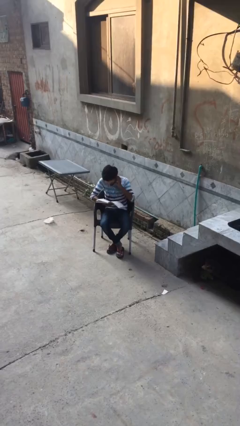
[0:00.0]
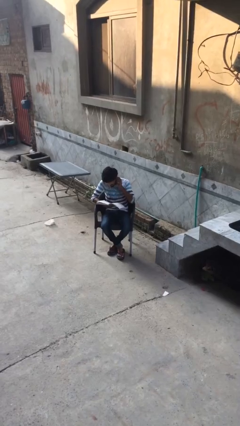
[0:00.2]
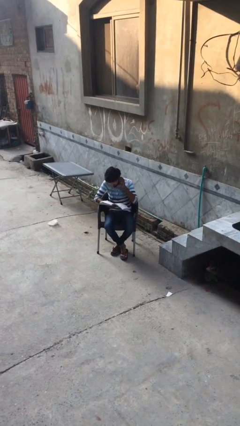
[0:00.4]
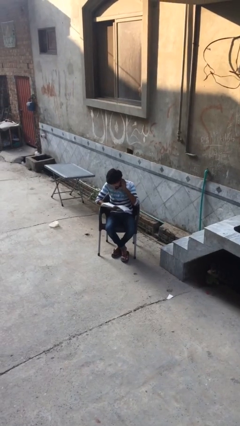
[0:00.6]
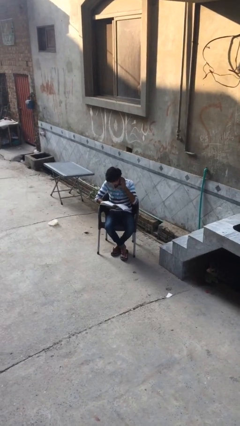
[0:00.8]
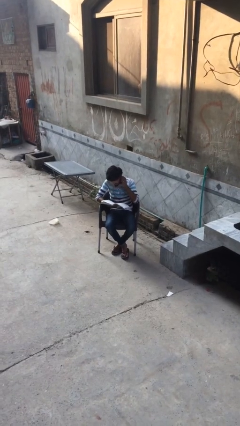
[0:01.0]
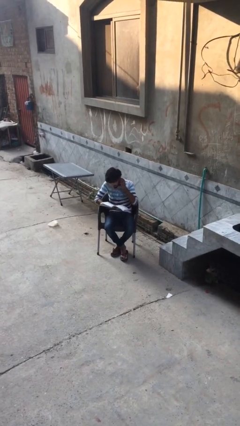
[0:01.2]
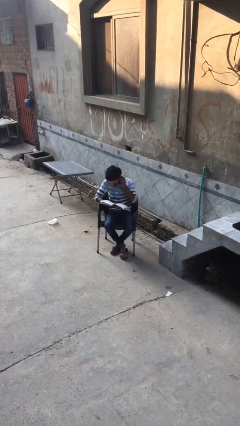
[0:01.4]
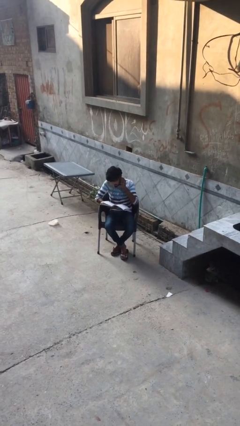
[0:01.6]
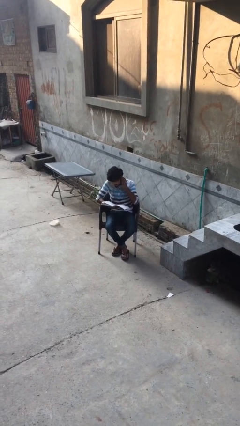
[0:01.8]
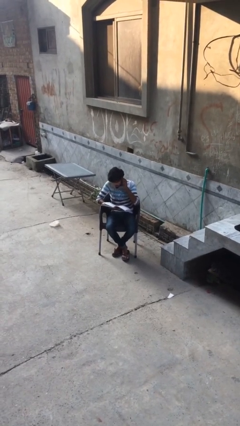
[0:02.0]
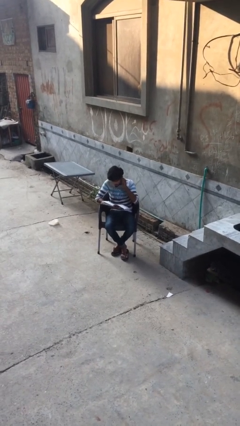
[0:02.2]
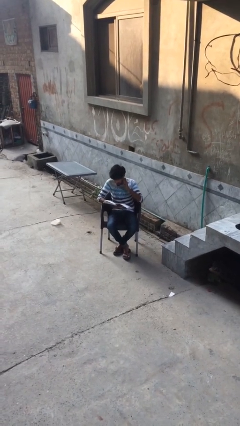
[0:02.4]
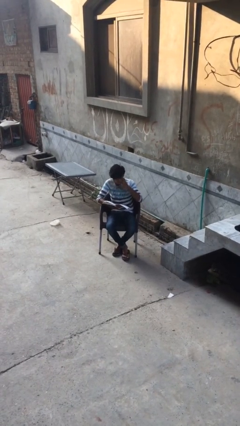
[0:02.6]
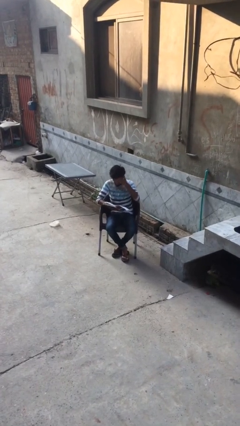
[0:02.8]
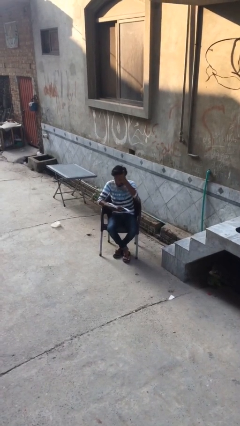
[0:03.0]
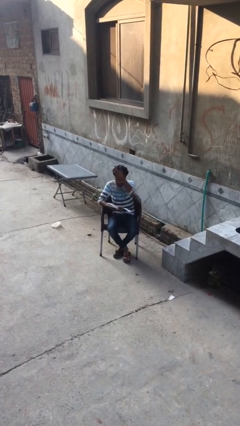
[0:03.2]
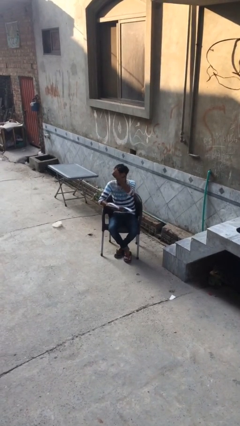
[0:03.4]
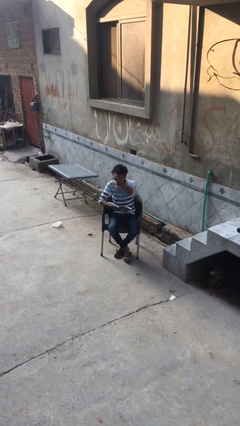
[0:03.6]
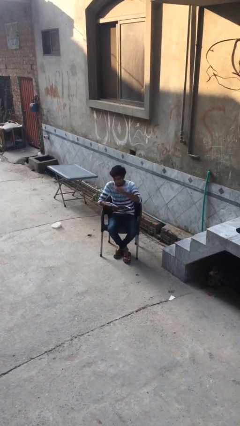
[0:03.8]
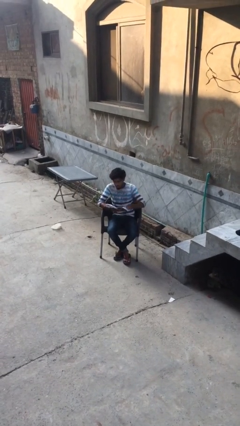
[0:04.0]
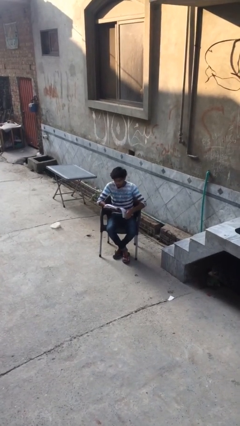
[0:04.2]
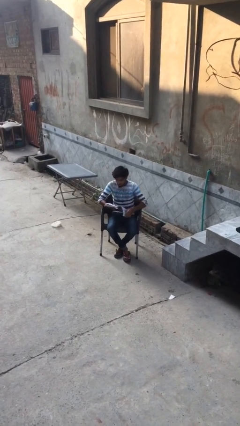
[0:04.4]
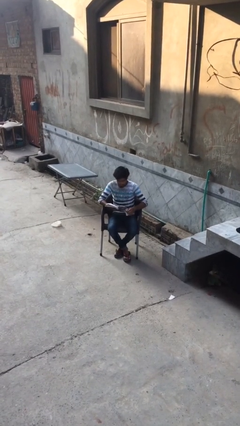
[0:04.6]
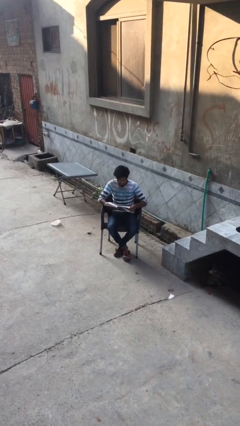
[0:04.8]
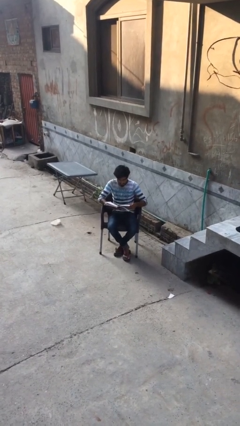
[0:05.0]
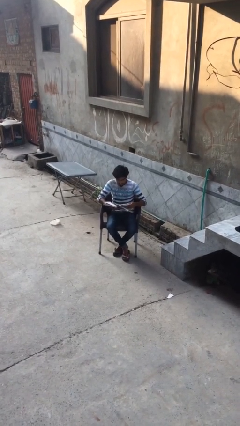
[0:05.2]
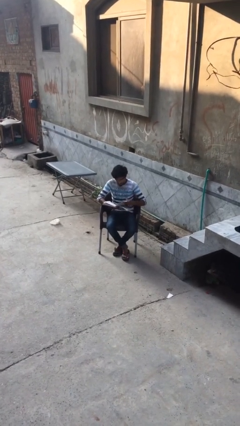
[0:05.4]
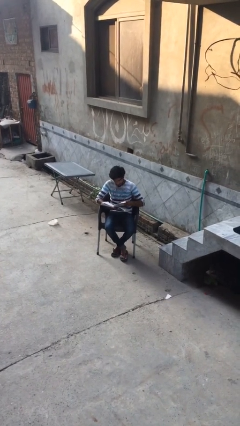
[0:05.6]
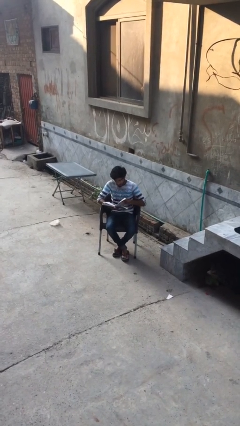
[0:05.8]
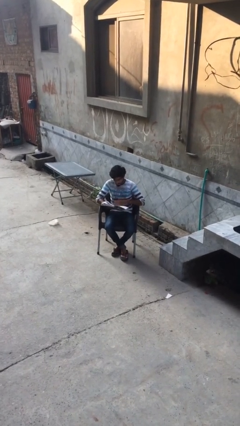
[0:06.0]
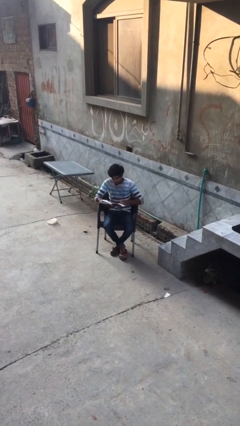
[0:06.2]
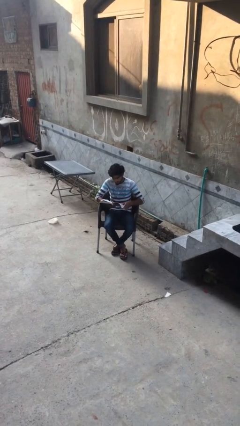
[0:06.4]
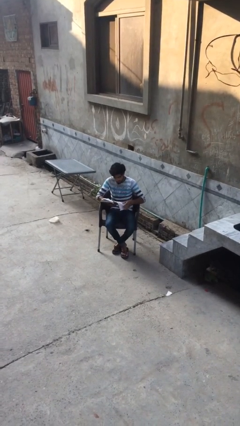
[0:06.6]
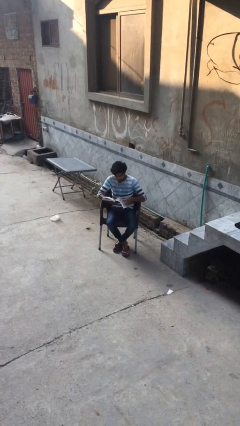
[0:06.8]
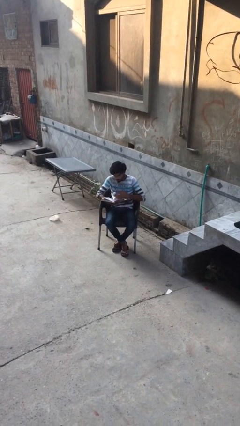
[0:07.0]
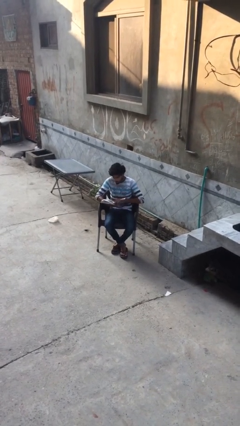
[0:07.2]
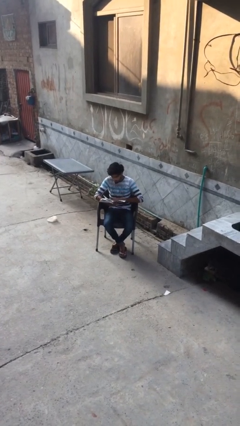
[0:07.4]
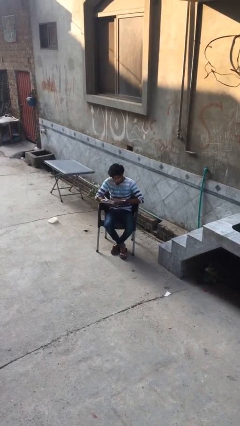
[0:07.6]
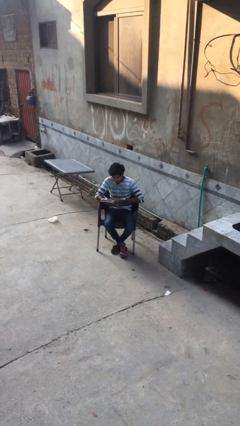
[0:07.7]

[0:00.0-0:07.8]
person reads document

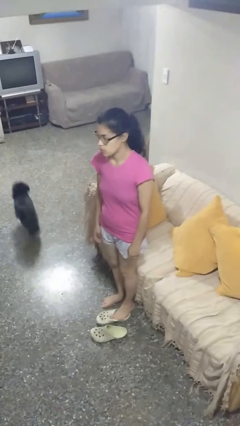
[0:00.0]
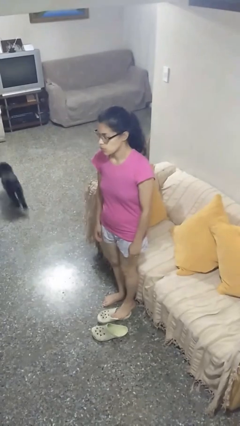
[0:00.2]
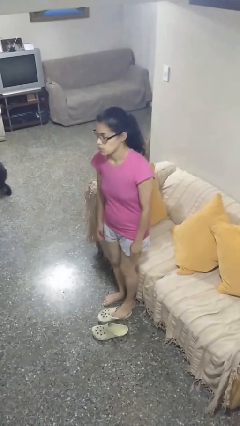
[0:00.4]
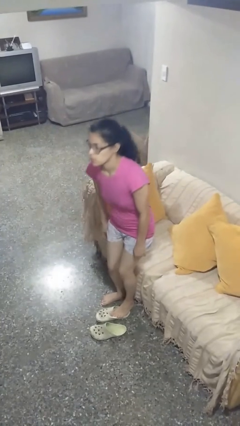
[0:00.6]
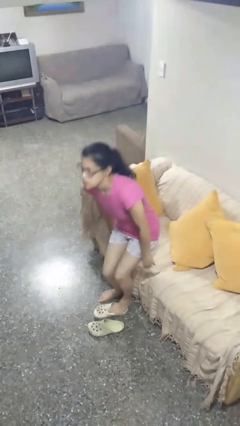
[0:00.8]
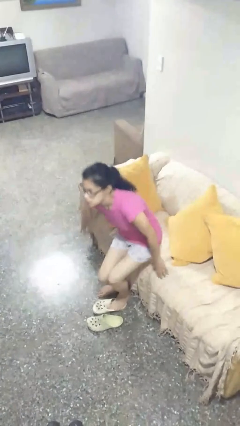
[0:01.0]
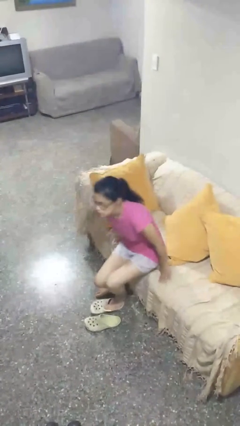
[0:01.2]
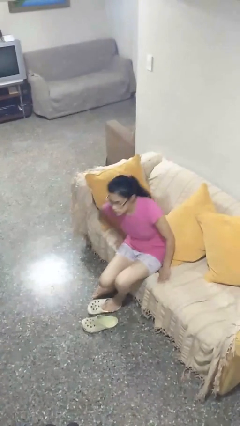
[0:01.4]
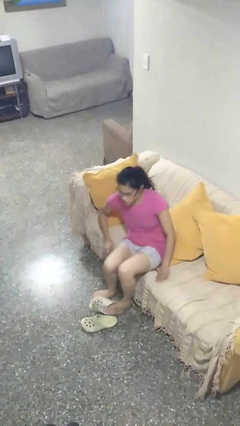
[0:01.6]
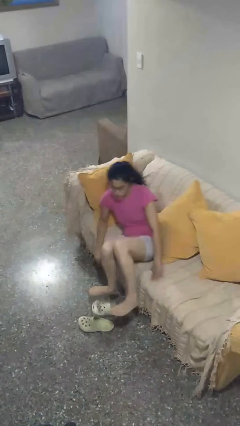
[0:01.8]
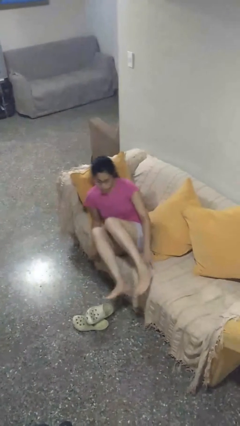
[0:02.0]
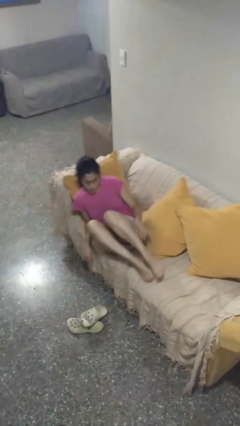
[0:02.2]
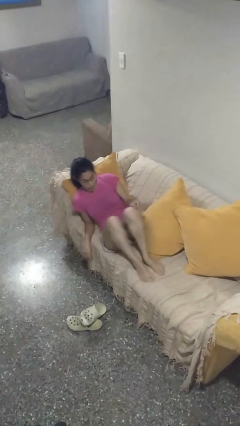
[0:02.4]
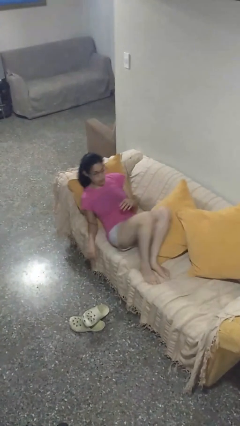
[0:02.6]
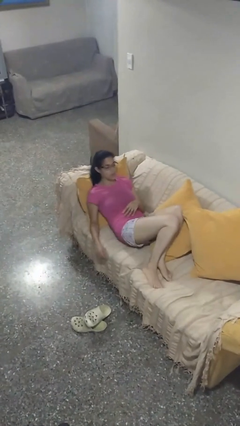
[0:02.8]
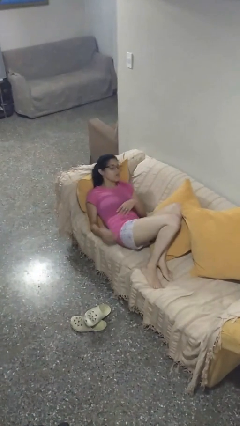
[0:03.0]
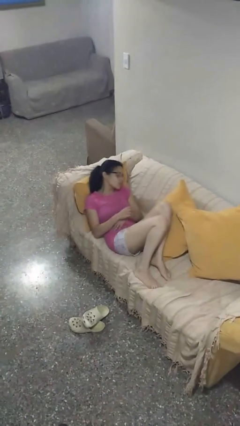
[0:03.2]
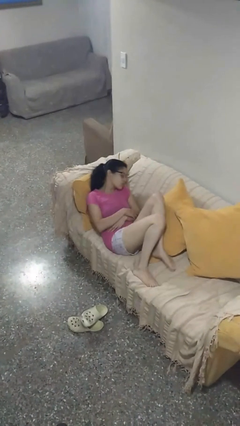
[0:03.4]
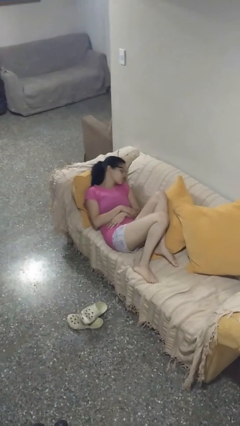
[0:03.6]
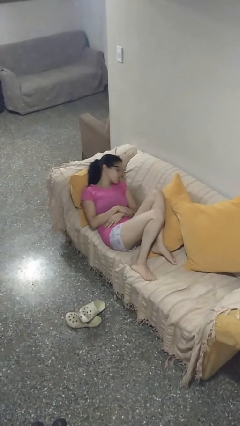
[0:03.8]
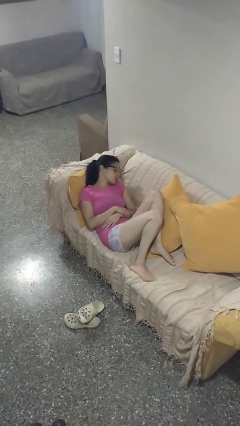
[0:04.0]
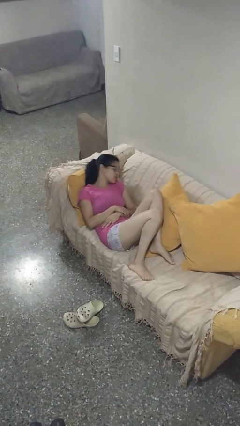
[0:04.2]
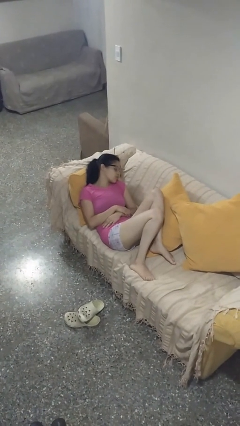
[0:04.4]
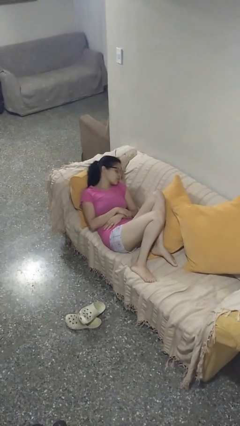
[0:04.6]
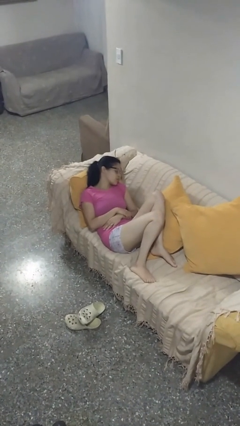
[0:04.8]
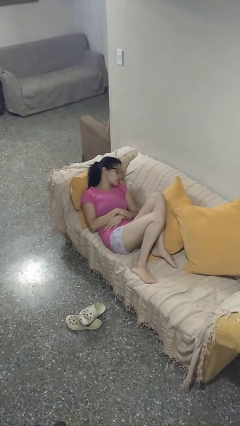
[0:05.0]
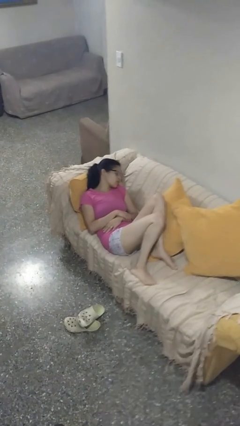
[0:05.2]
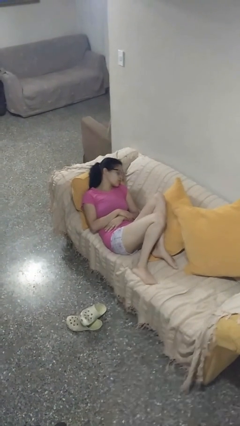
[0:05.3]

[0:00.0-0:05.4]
person lies down on couch

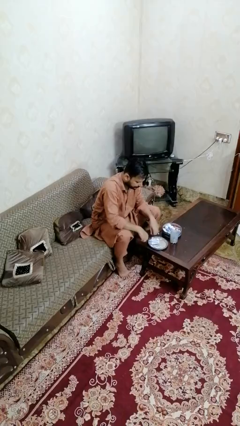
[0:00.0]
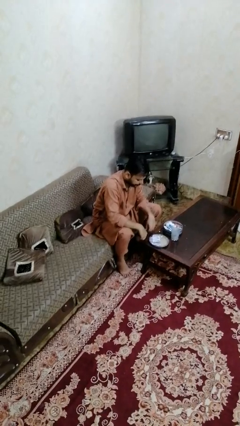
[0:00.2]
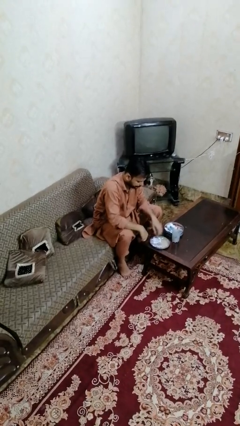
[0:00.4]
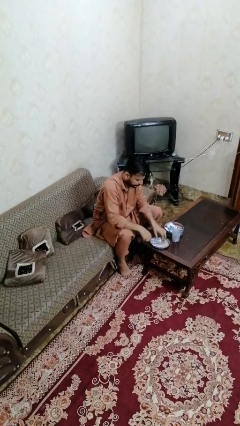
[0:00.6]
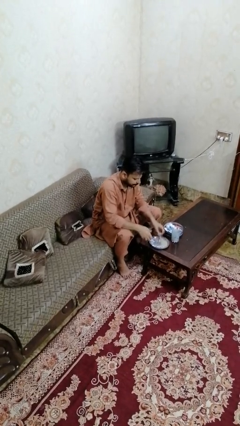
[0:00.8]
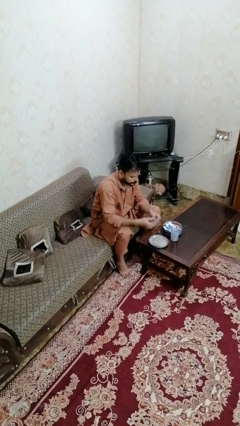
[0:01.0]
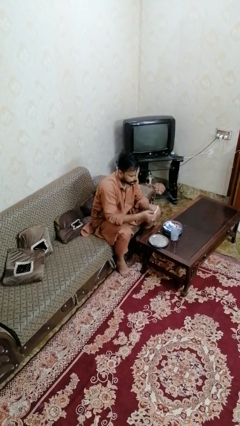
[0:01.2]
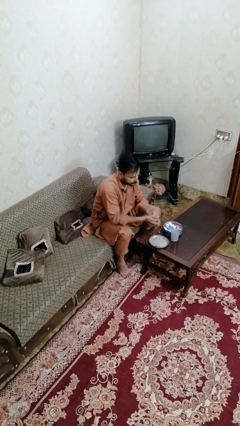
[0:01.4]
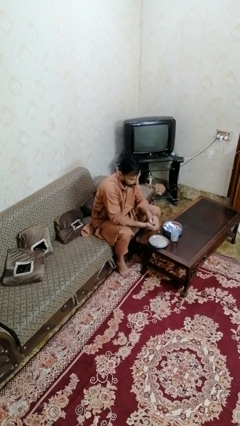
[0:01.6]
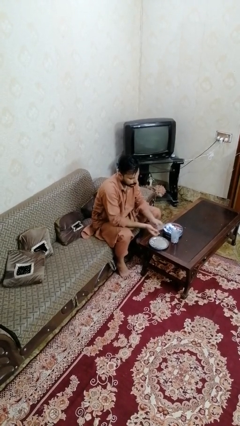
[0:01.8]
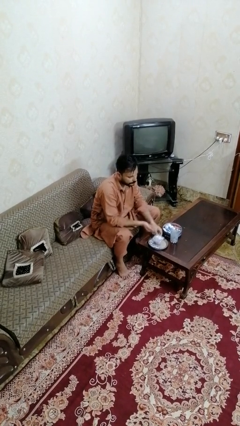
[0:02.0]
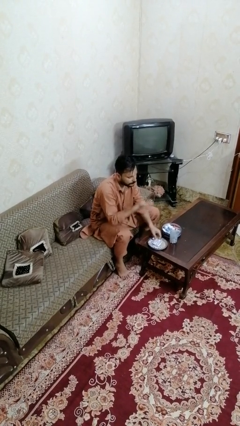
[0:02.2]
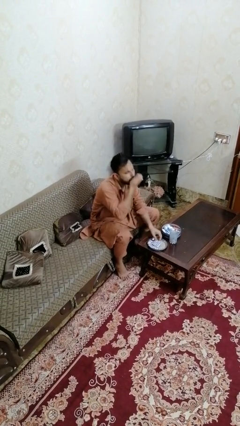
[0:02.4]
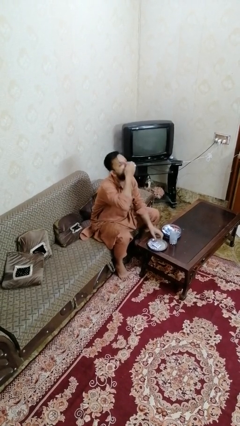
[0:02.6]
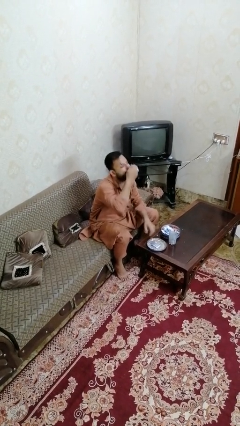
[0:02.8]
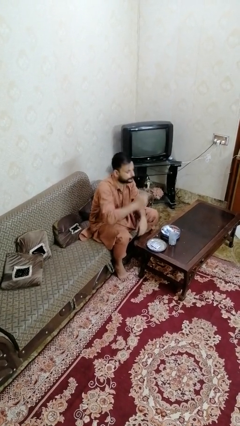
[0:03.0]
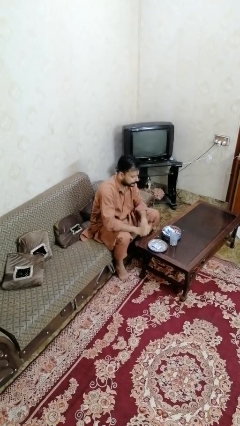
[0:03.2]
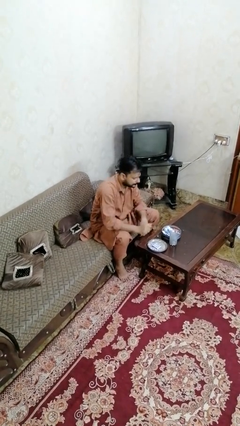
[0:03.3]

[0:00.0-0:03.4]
person takes medicine pills

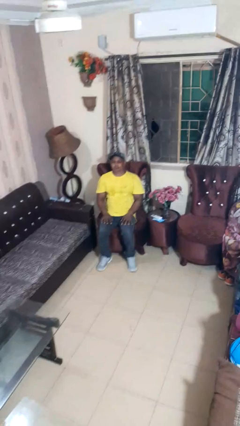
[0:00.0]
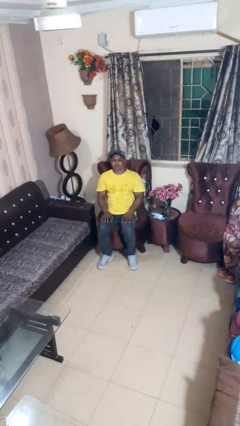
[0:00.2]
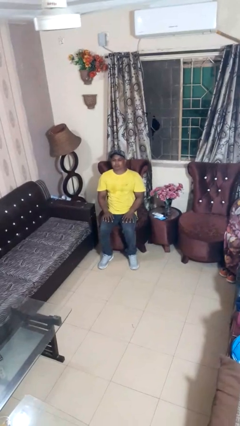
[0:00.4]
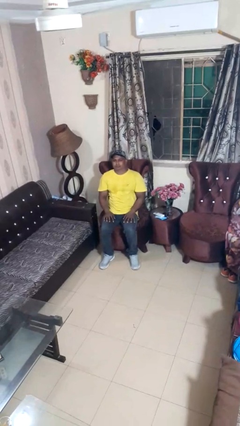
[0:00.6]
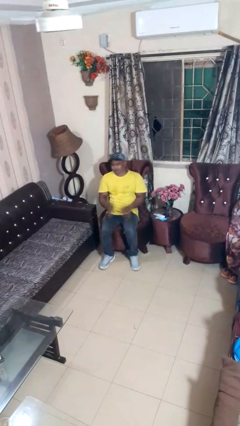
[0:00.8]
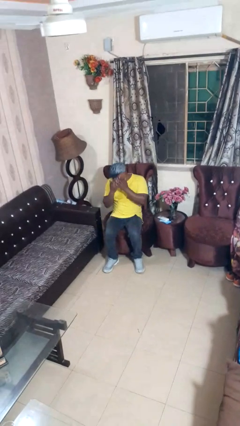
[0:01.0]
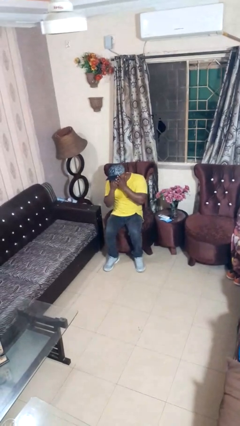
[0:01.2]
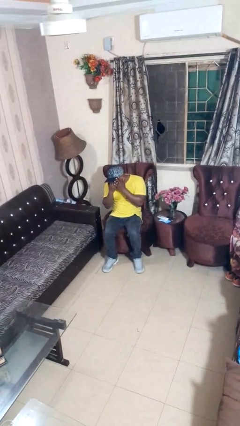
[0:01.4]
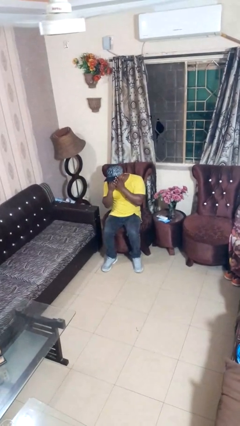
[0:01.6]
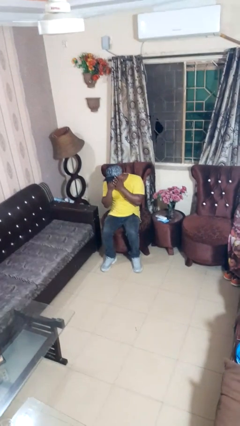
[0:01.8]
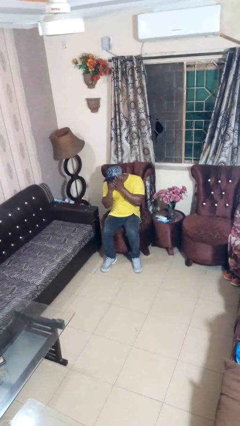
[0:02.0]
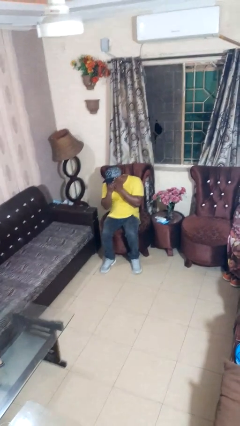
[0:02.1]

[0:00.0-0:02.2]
person covers face with hands
